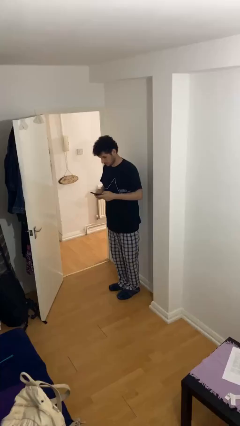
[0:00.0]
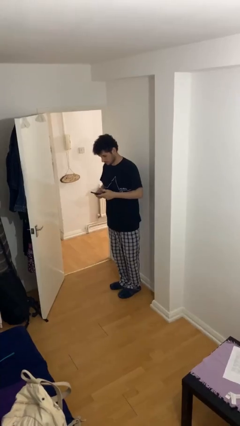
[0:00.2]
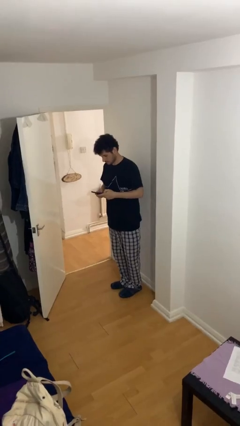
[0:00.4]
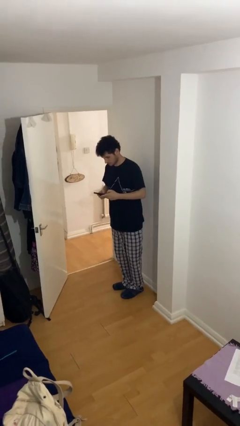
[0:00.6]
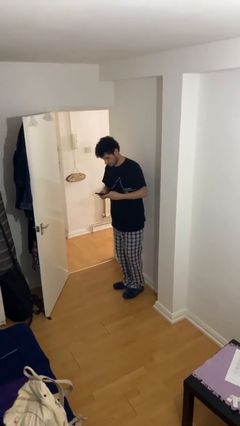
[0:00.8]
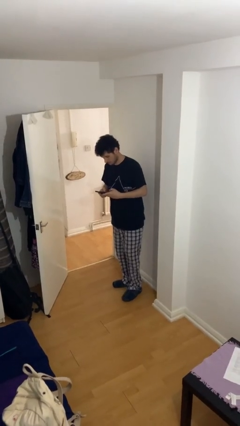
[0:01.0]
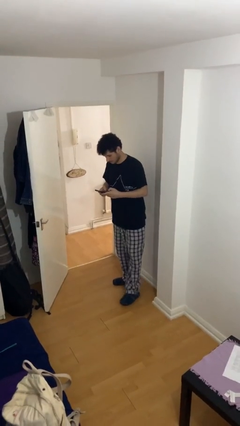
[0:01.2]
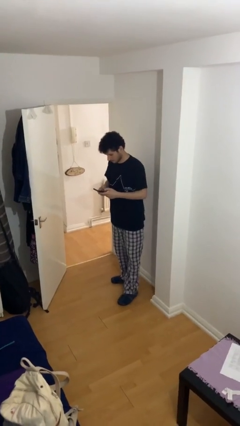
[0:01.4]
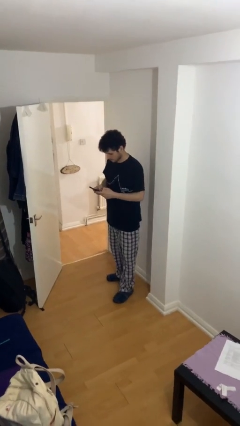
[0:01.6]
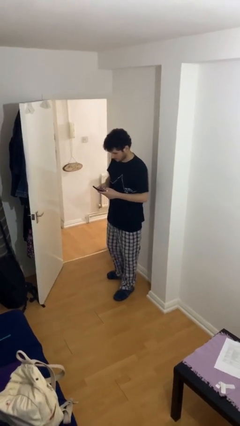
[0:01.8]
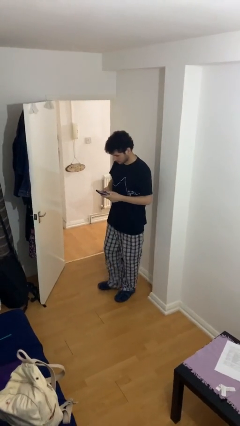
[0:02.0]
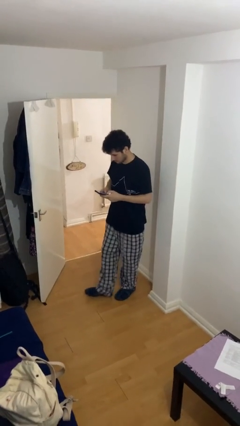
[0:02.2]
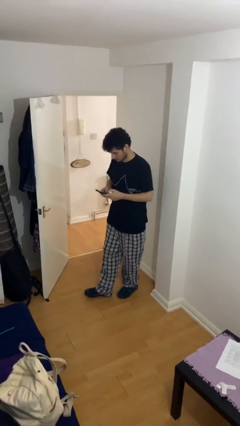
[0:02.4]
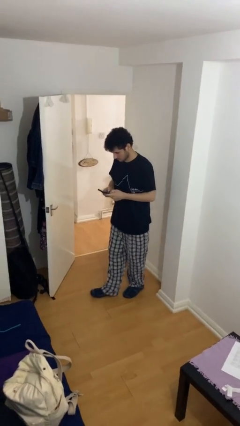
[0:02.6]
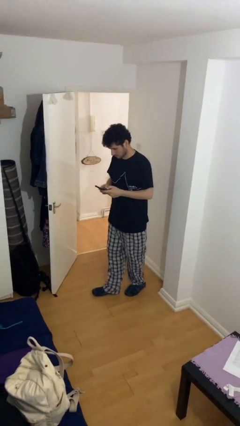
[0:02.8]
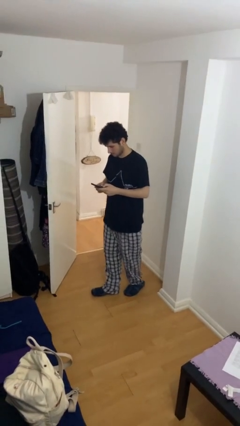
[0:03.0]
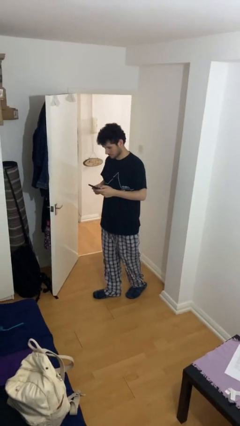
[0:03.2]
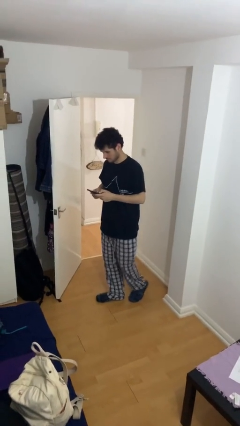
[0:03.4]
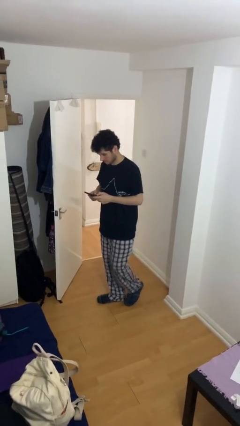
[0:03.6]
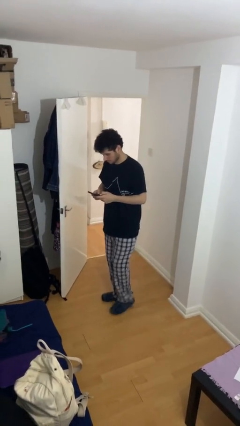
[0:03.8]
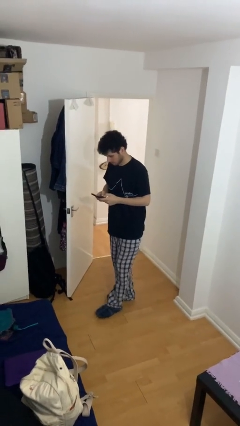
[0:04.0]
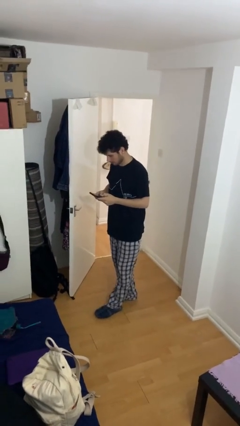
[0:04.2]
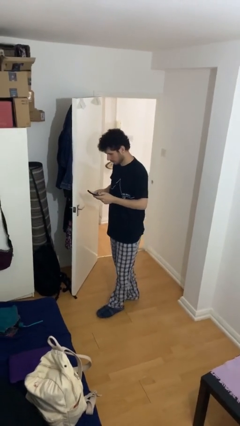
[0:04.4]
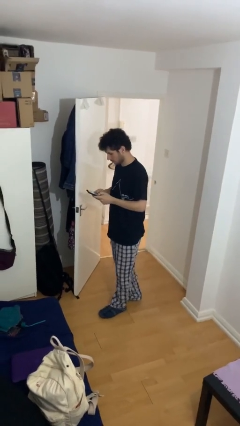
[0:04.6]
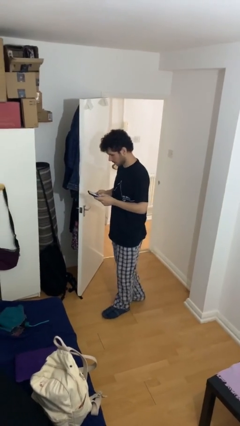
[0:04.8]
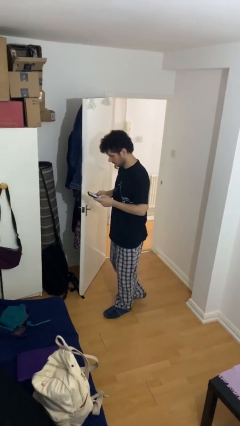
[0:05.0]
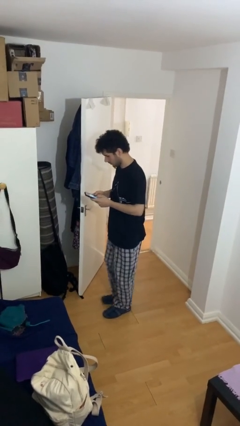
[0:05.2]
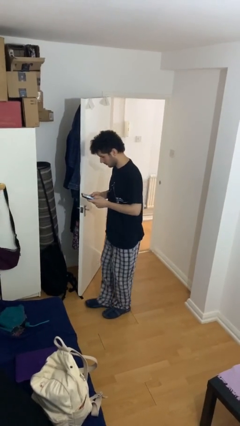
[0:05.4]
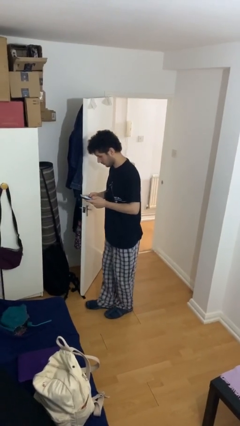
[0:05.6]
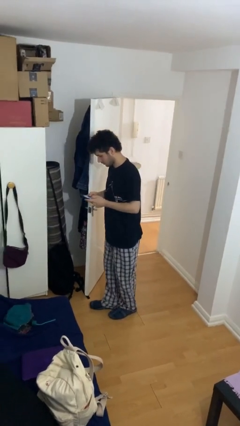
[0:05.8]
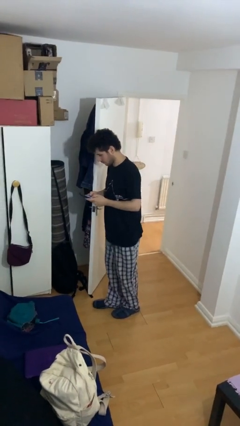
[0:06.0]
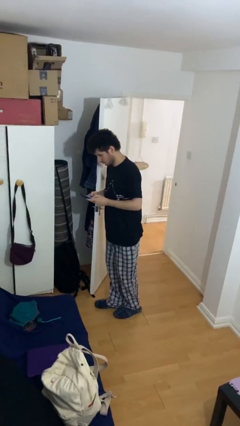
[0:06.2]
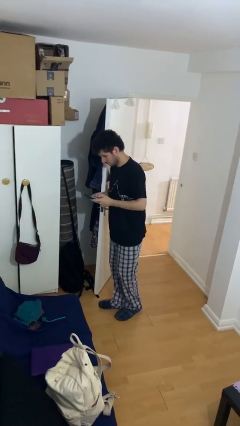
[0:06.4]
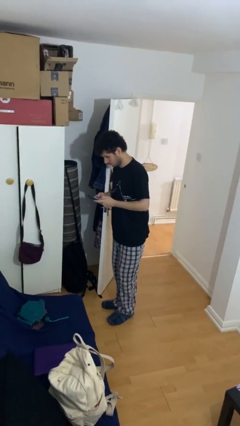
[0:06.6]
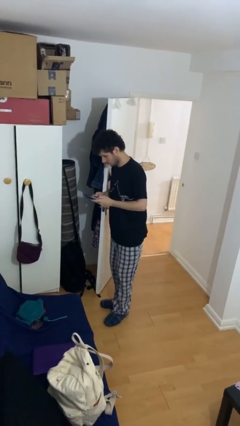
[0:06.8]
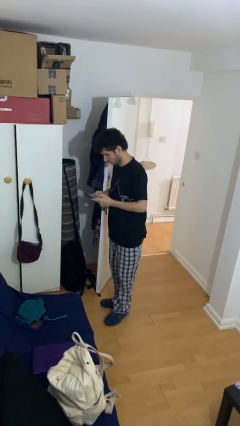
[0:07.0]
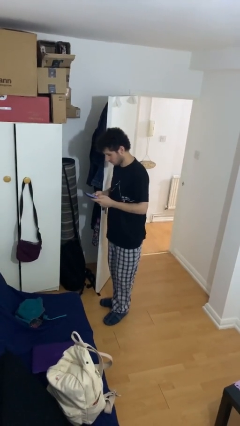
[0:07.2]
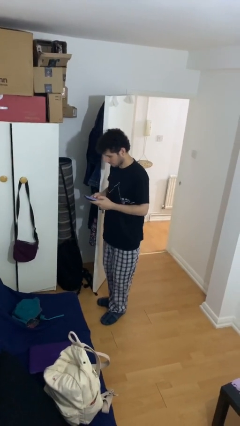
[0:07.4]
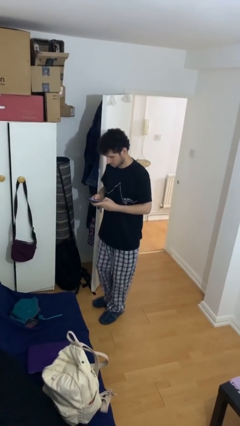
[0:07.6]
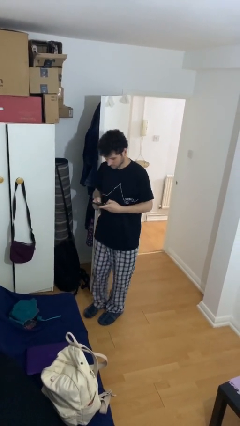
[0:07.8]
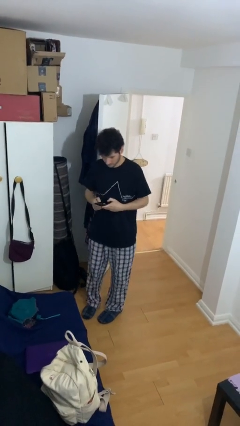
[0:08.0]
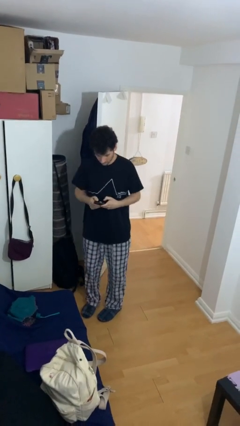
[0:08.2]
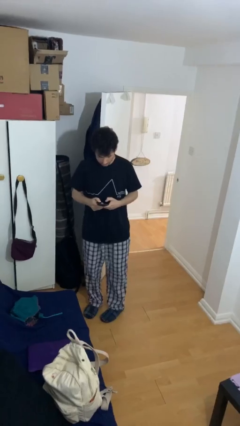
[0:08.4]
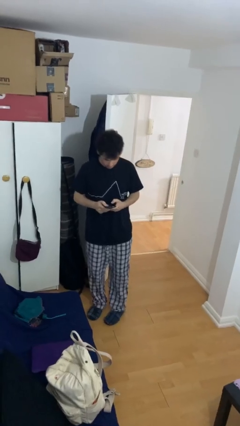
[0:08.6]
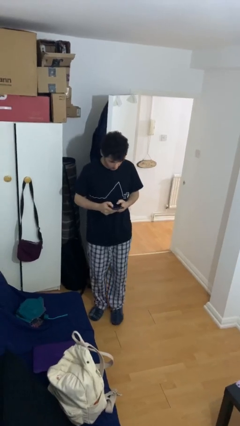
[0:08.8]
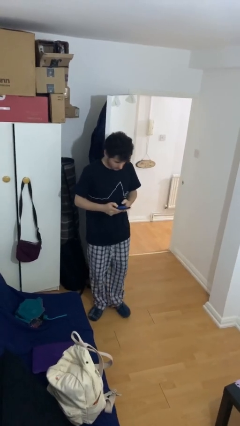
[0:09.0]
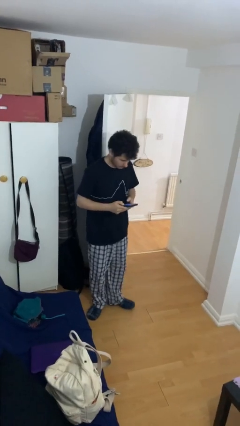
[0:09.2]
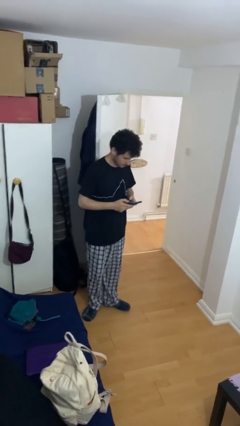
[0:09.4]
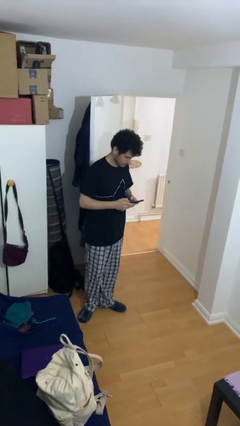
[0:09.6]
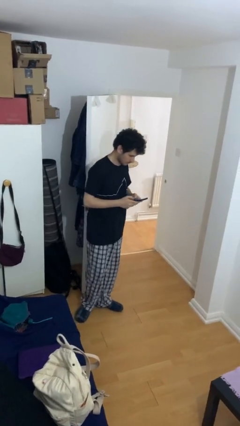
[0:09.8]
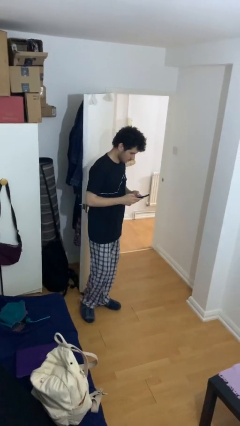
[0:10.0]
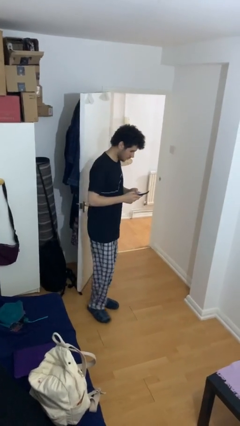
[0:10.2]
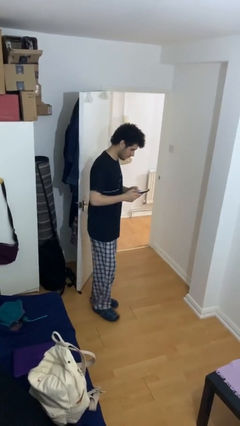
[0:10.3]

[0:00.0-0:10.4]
person texts on phone

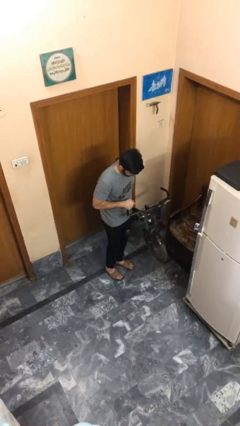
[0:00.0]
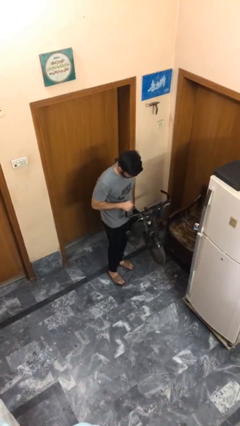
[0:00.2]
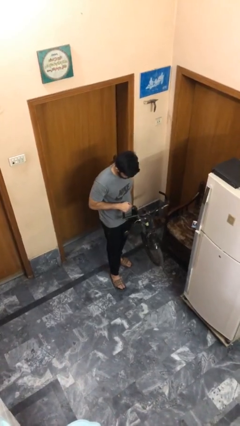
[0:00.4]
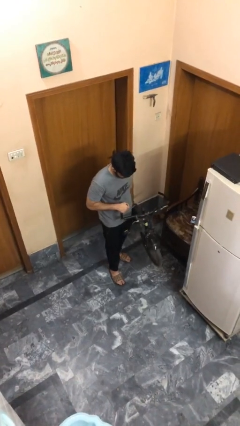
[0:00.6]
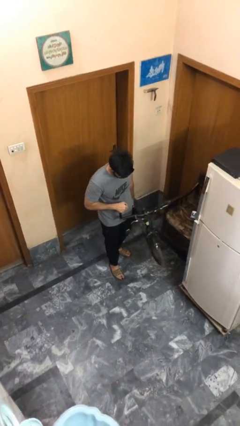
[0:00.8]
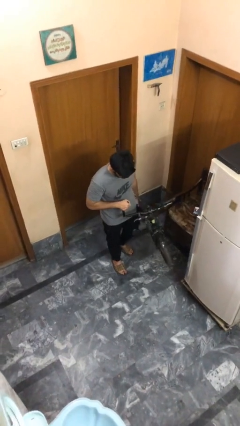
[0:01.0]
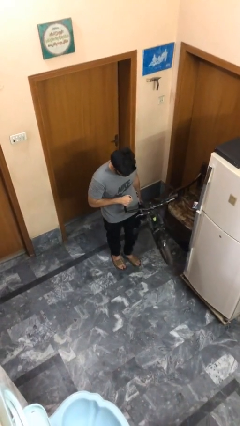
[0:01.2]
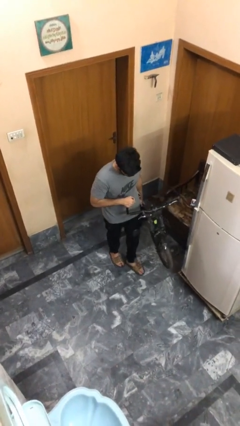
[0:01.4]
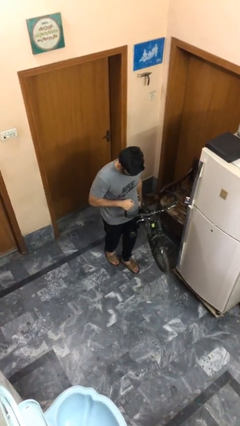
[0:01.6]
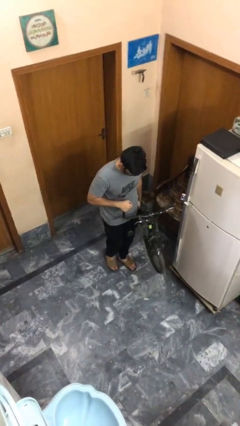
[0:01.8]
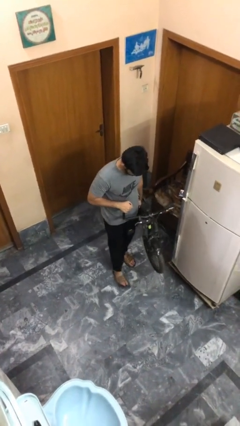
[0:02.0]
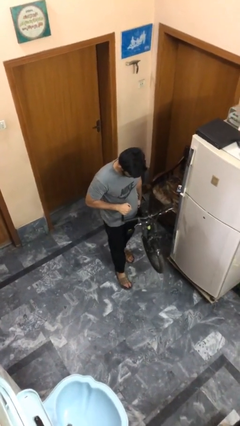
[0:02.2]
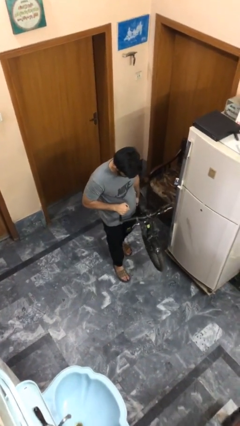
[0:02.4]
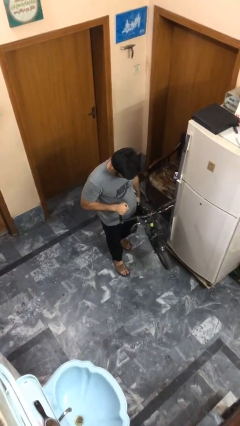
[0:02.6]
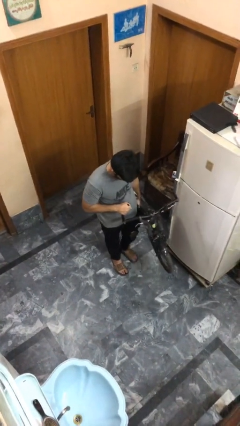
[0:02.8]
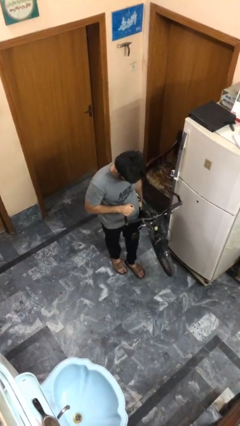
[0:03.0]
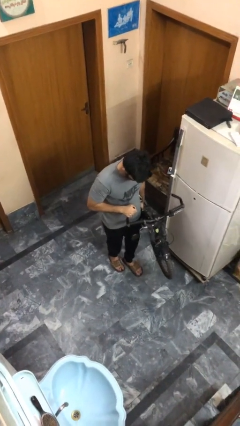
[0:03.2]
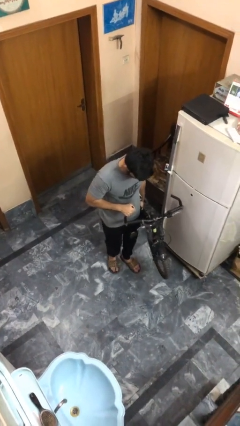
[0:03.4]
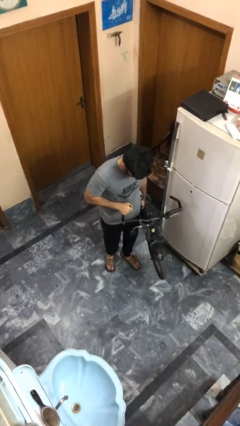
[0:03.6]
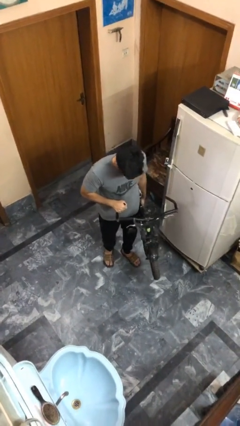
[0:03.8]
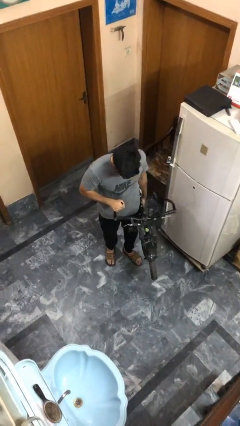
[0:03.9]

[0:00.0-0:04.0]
person carries bicycle

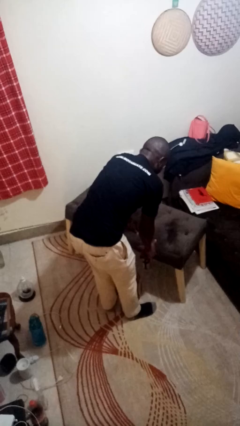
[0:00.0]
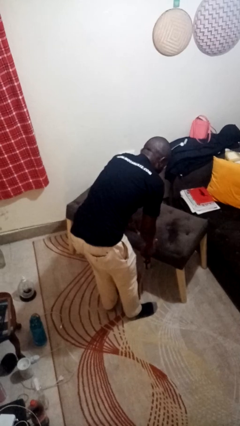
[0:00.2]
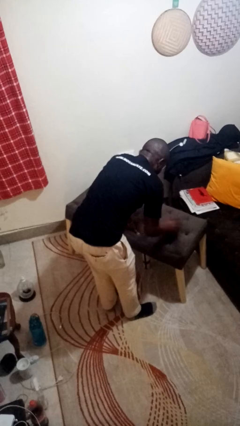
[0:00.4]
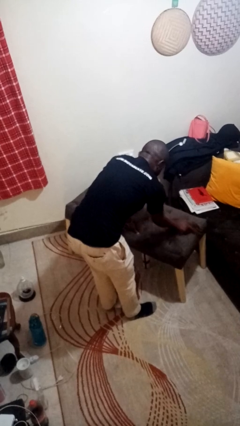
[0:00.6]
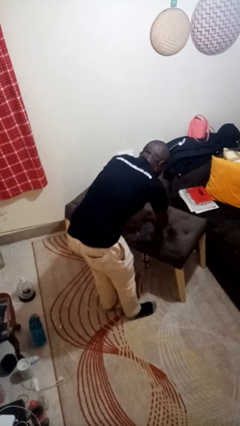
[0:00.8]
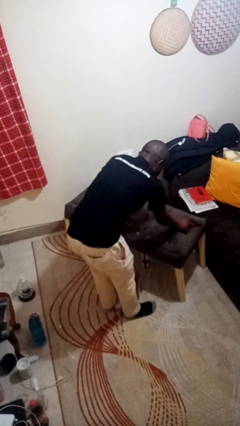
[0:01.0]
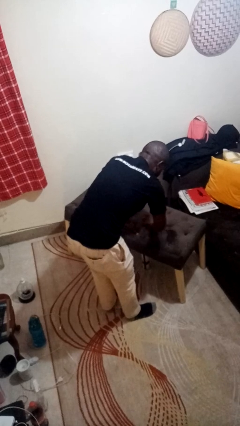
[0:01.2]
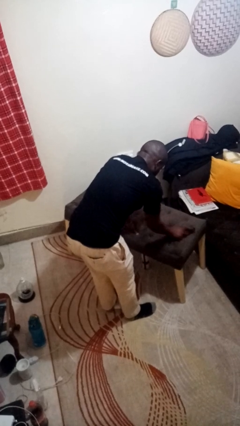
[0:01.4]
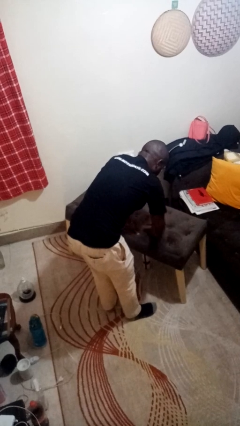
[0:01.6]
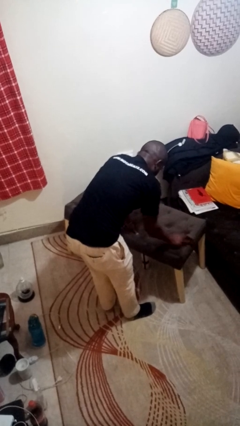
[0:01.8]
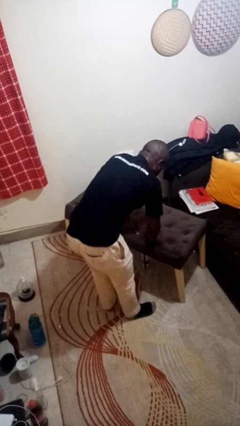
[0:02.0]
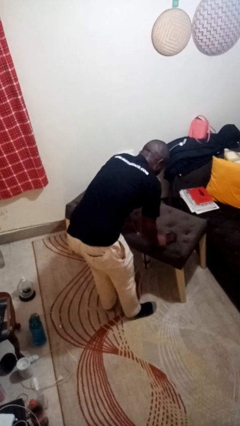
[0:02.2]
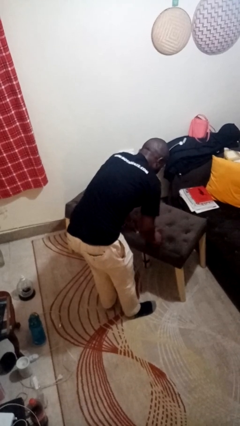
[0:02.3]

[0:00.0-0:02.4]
person cleans table with rag

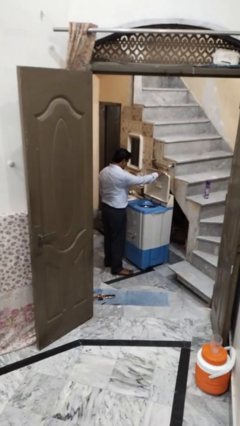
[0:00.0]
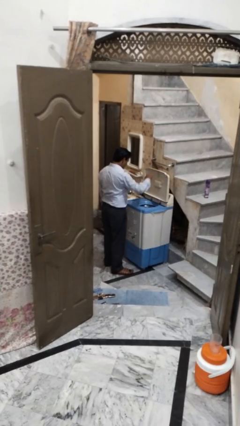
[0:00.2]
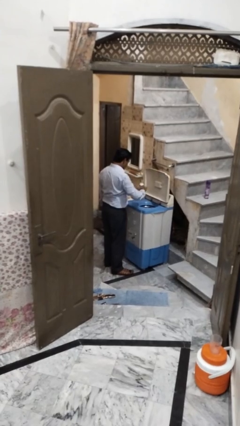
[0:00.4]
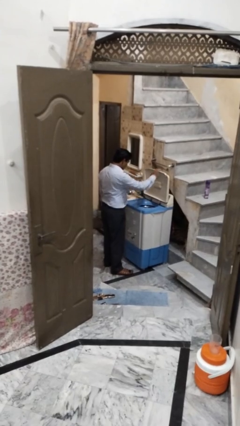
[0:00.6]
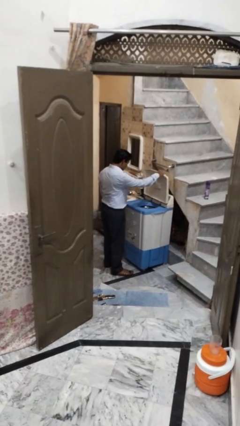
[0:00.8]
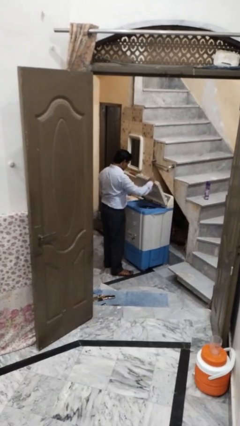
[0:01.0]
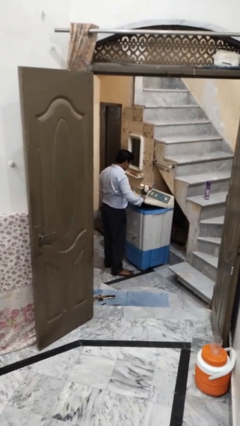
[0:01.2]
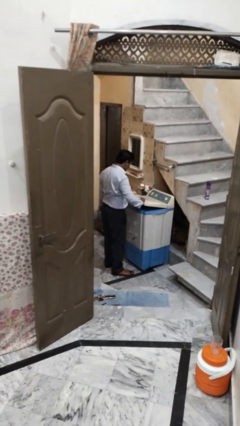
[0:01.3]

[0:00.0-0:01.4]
person closes clothes washer
